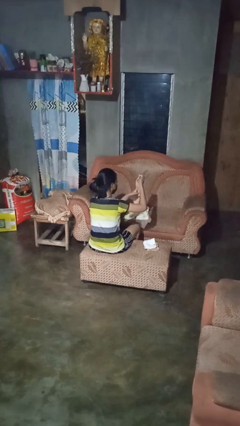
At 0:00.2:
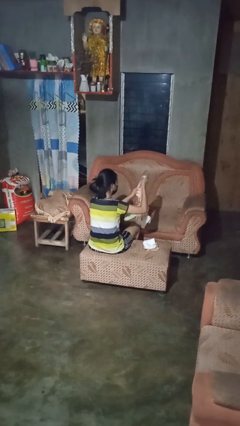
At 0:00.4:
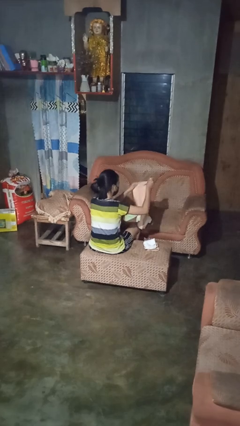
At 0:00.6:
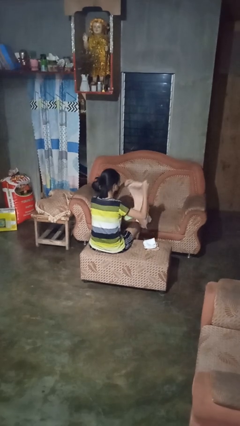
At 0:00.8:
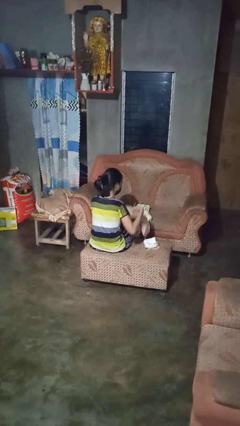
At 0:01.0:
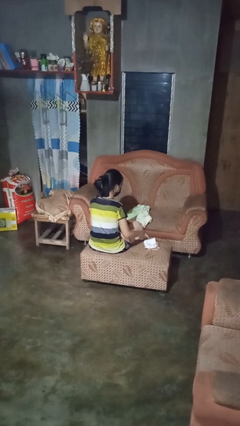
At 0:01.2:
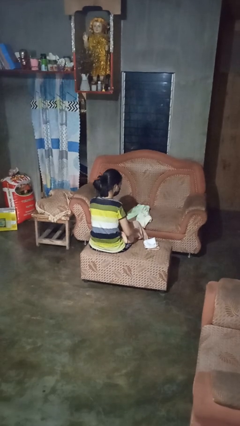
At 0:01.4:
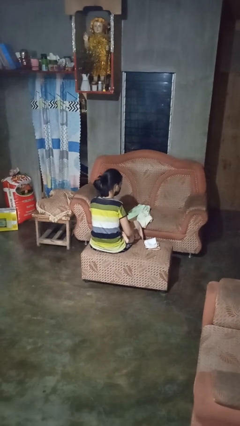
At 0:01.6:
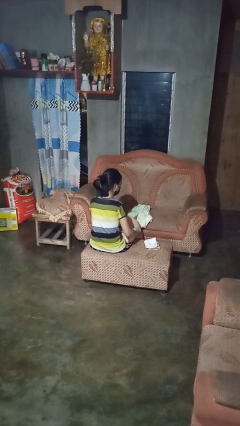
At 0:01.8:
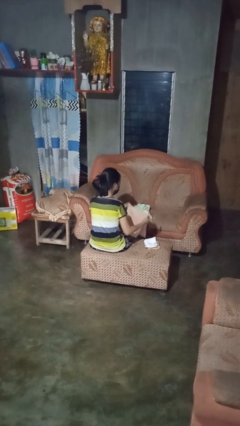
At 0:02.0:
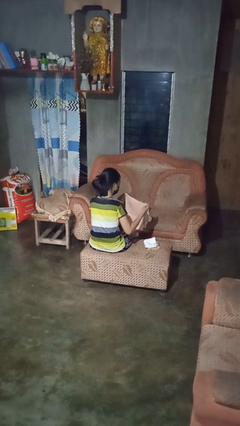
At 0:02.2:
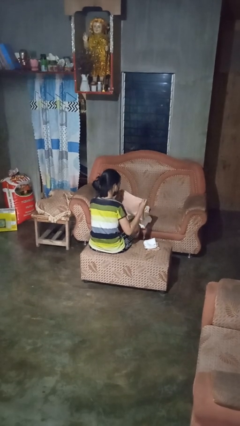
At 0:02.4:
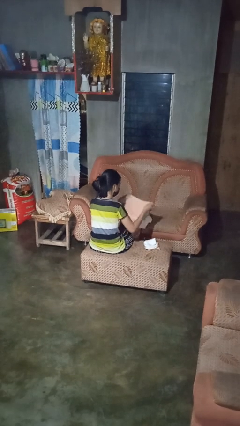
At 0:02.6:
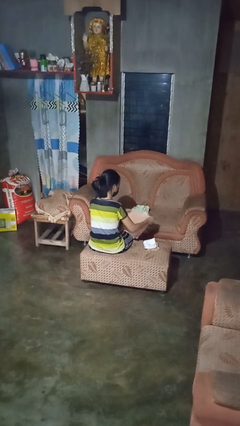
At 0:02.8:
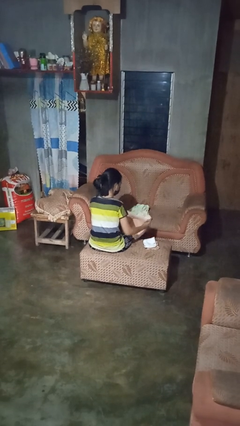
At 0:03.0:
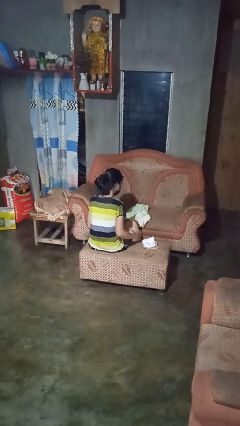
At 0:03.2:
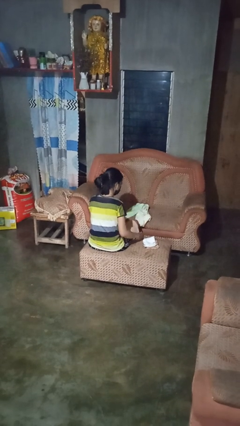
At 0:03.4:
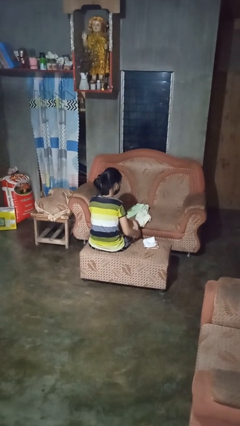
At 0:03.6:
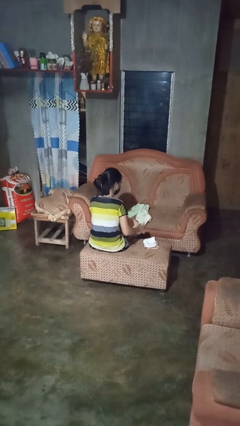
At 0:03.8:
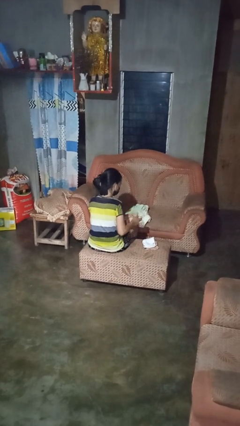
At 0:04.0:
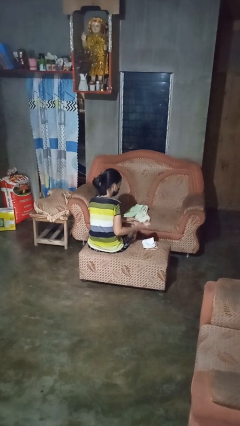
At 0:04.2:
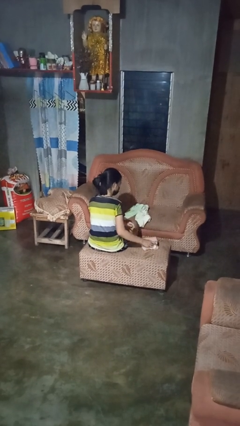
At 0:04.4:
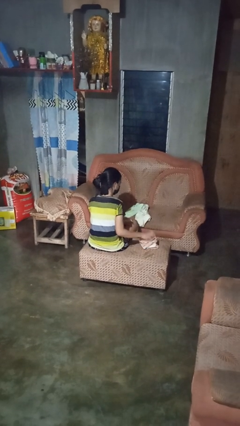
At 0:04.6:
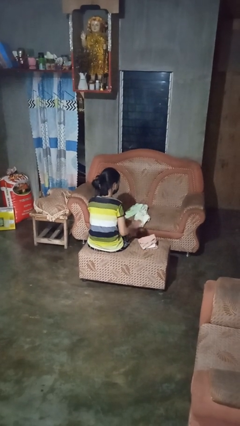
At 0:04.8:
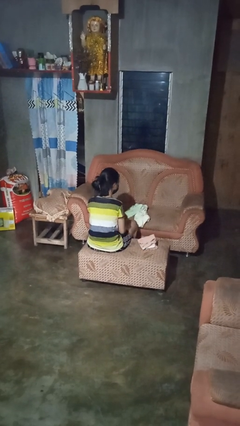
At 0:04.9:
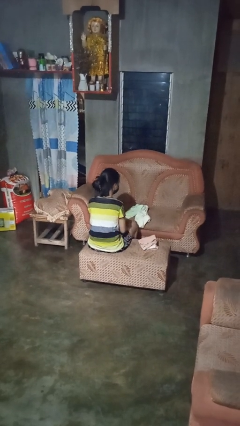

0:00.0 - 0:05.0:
person folds towel

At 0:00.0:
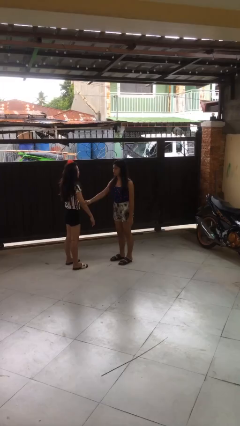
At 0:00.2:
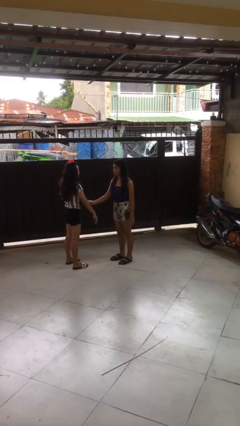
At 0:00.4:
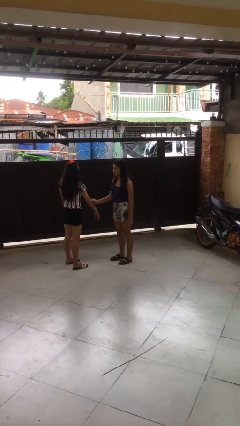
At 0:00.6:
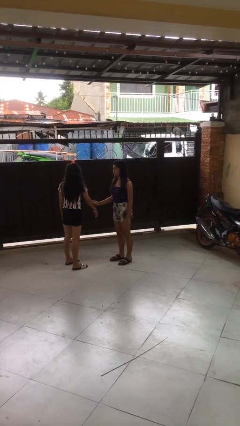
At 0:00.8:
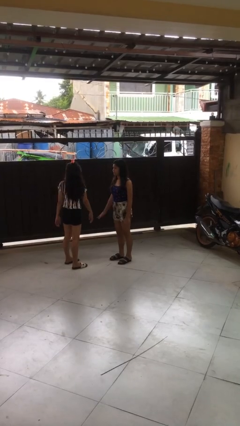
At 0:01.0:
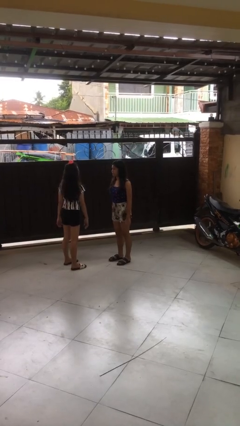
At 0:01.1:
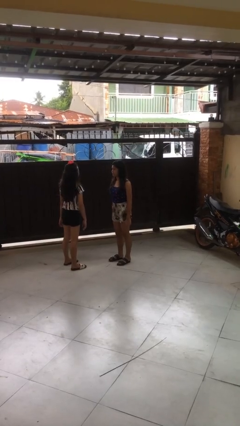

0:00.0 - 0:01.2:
person grabs person by forearm

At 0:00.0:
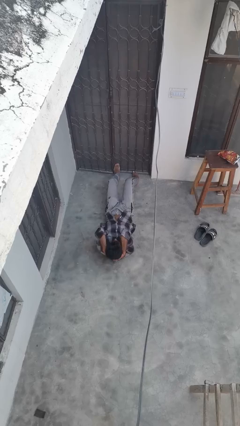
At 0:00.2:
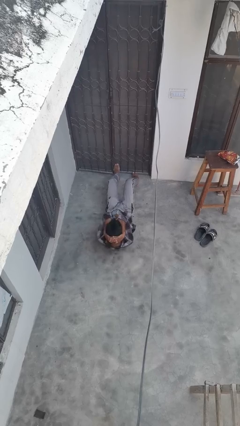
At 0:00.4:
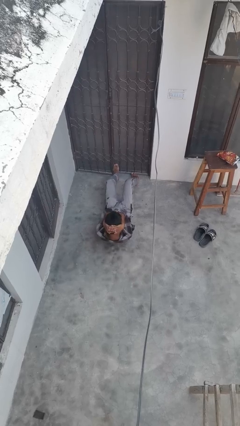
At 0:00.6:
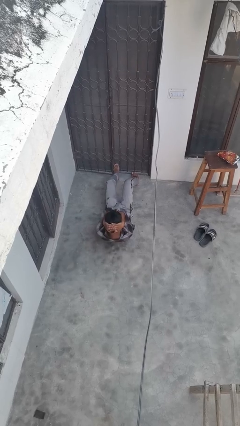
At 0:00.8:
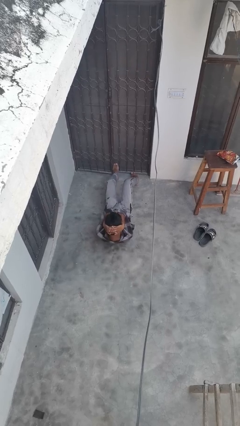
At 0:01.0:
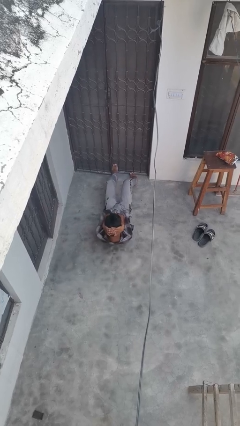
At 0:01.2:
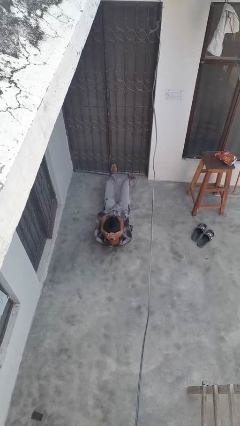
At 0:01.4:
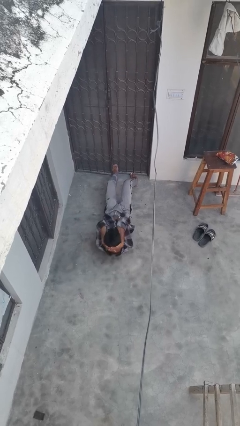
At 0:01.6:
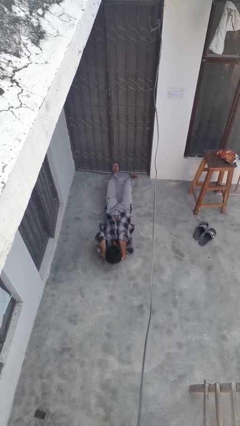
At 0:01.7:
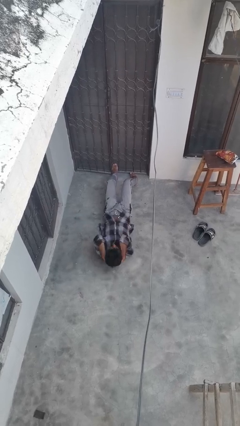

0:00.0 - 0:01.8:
person exercises with situp

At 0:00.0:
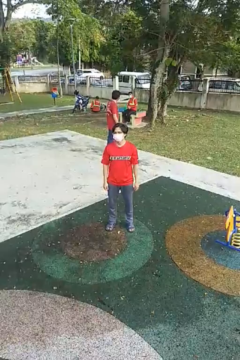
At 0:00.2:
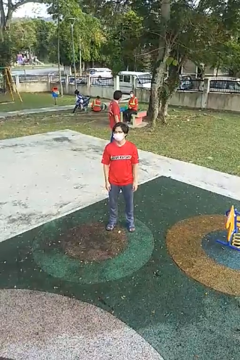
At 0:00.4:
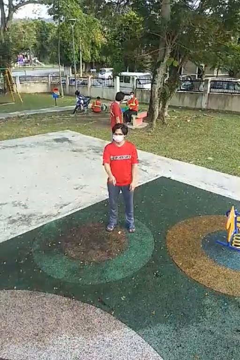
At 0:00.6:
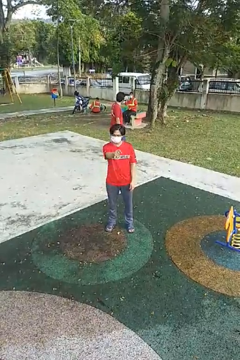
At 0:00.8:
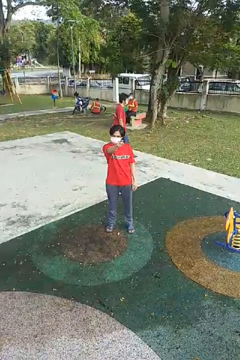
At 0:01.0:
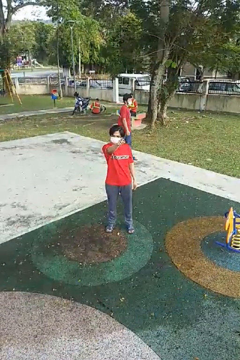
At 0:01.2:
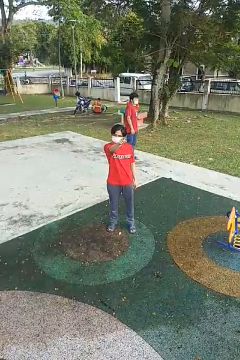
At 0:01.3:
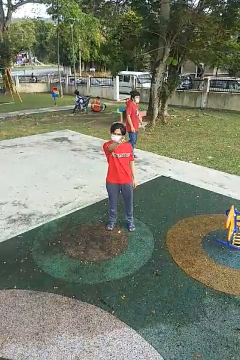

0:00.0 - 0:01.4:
person points at person

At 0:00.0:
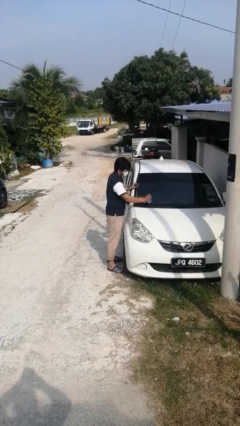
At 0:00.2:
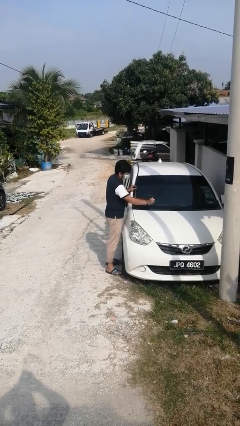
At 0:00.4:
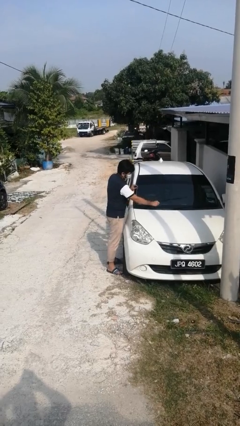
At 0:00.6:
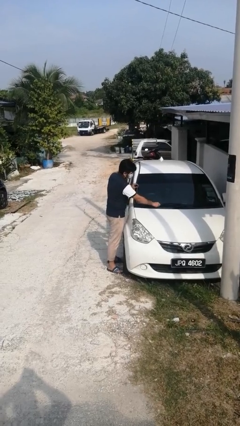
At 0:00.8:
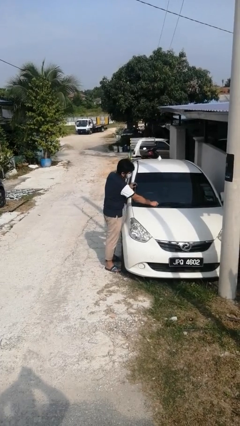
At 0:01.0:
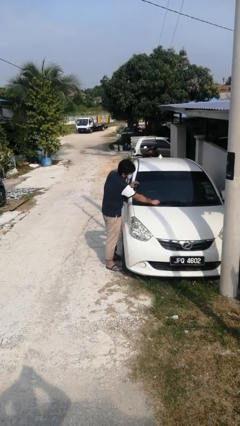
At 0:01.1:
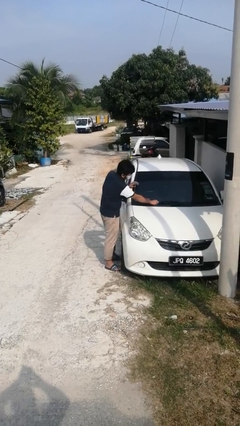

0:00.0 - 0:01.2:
person flips down car wipers

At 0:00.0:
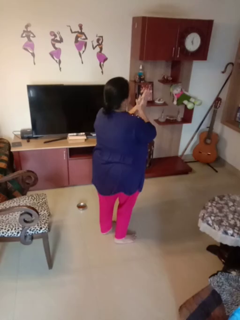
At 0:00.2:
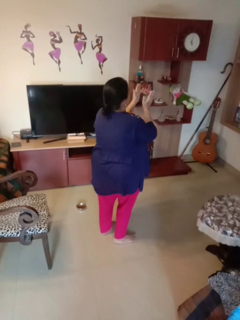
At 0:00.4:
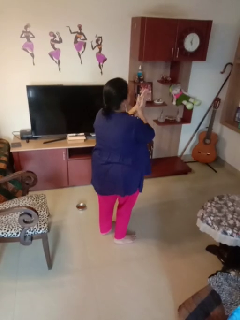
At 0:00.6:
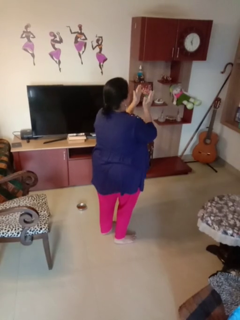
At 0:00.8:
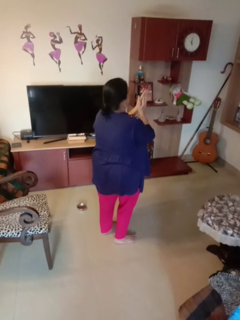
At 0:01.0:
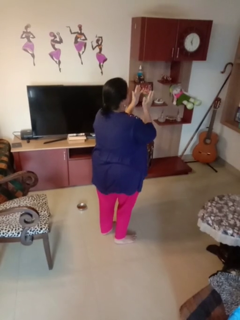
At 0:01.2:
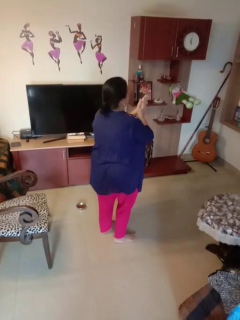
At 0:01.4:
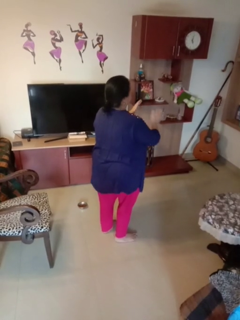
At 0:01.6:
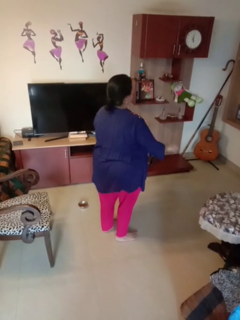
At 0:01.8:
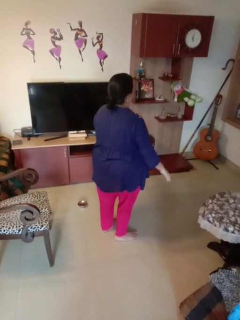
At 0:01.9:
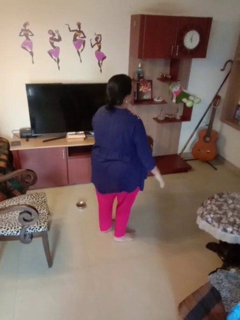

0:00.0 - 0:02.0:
person claps hands

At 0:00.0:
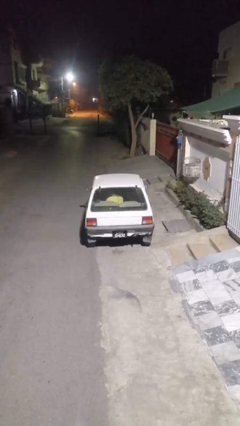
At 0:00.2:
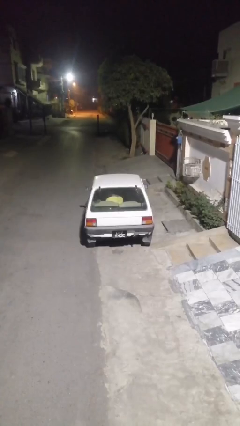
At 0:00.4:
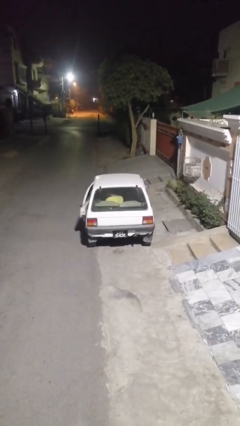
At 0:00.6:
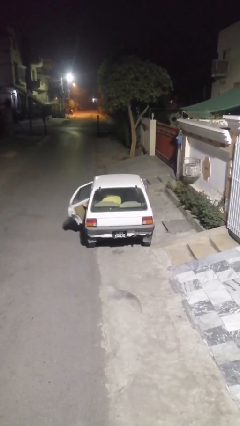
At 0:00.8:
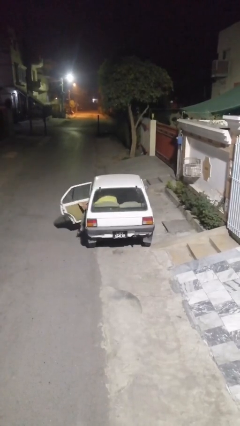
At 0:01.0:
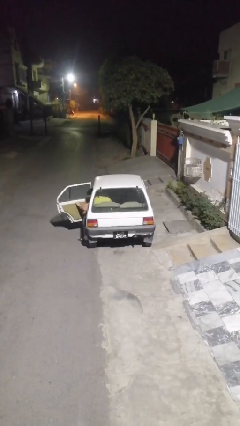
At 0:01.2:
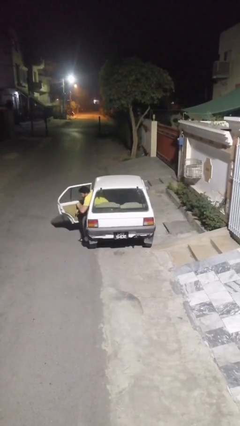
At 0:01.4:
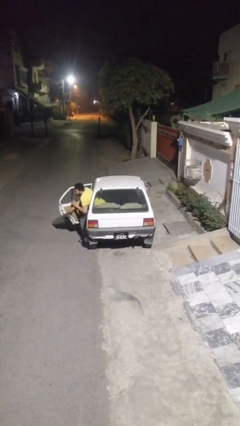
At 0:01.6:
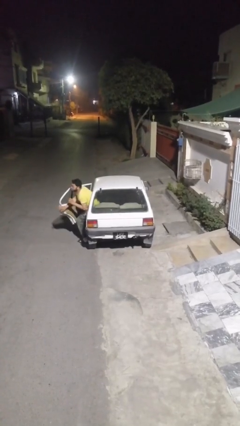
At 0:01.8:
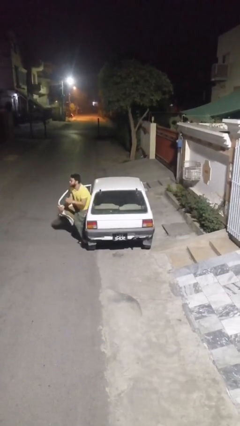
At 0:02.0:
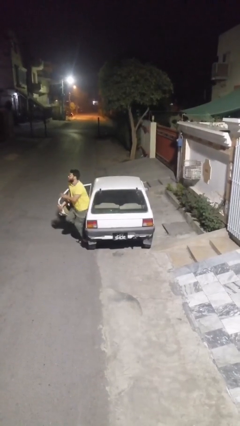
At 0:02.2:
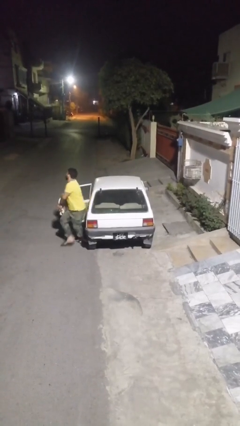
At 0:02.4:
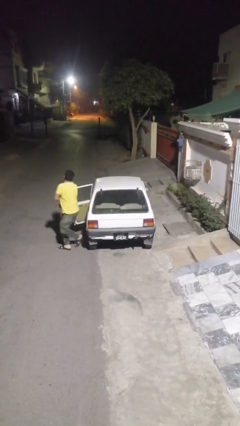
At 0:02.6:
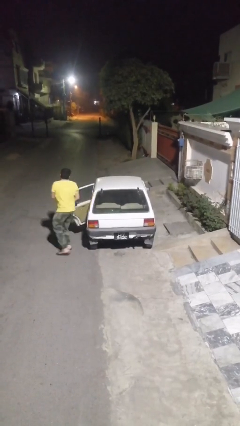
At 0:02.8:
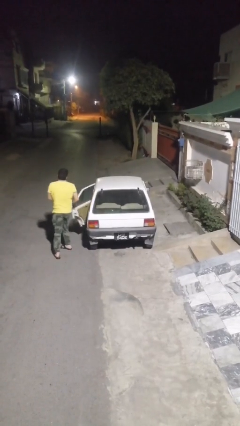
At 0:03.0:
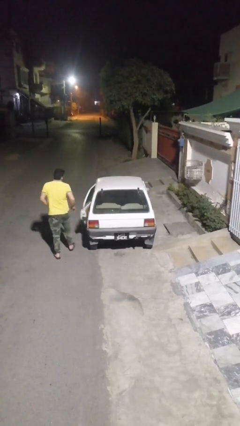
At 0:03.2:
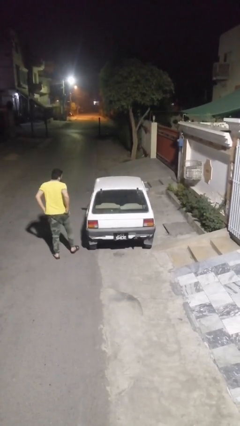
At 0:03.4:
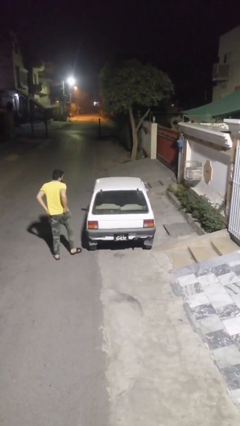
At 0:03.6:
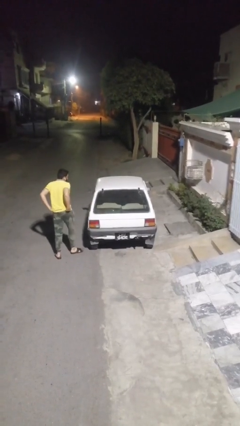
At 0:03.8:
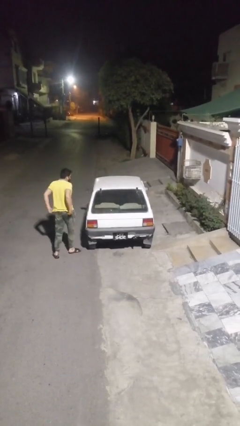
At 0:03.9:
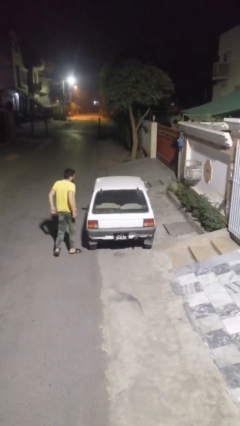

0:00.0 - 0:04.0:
car drops off person

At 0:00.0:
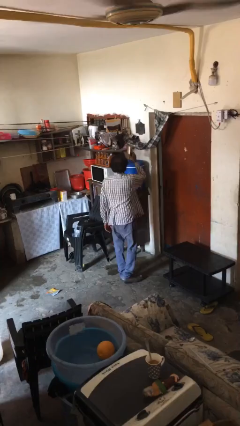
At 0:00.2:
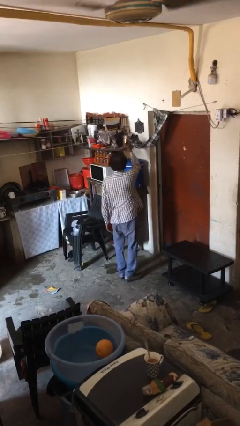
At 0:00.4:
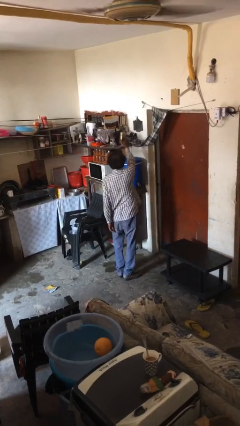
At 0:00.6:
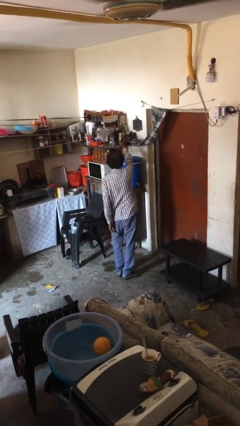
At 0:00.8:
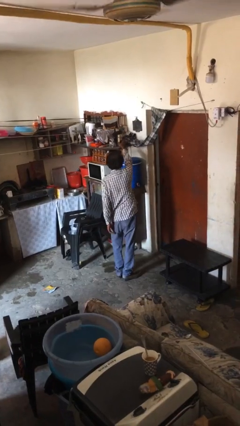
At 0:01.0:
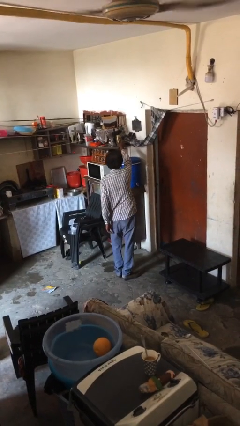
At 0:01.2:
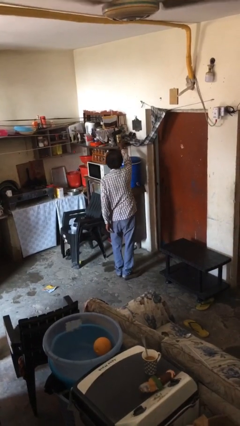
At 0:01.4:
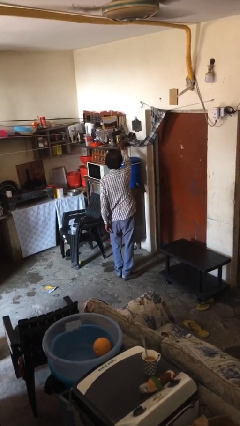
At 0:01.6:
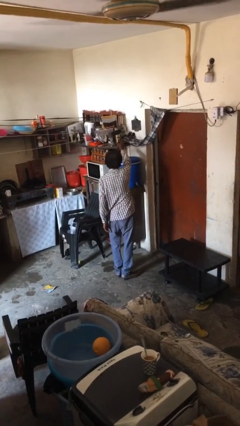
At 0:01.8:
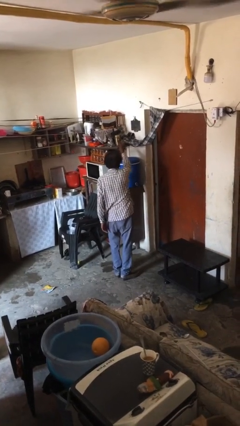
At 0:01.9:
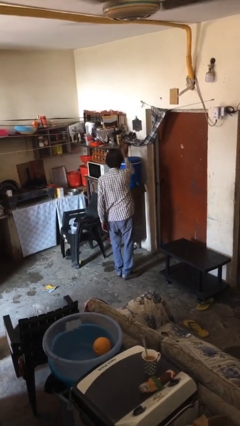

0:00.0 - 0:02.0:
person puts down object on shelf
